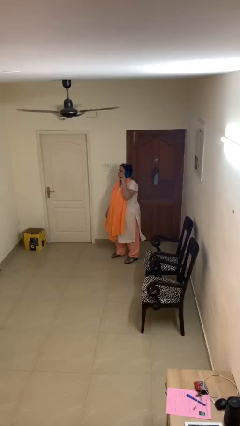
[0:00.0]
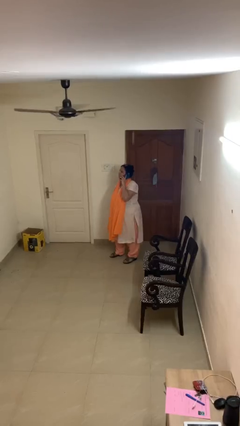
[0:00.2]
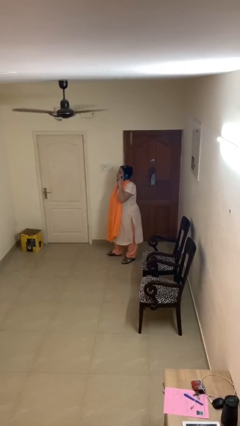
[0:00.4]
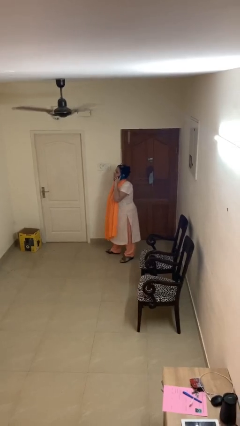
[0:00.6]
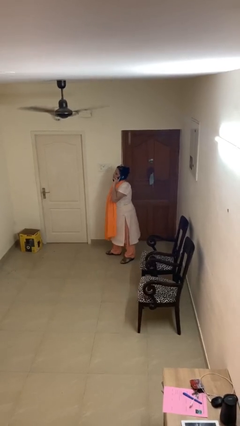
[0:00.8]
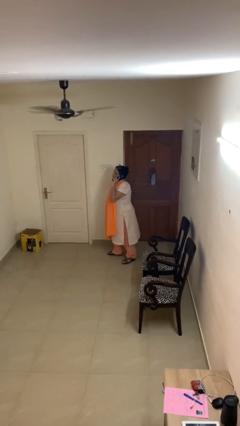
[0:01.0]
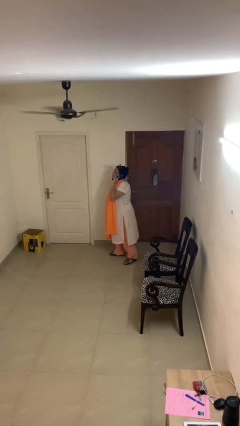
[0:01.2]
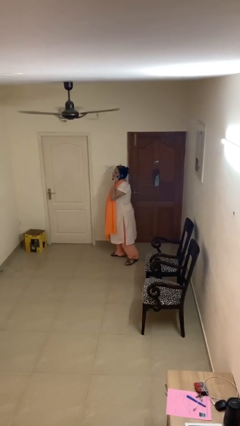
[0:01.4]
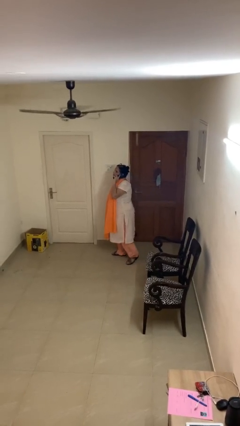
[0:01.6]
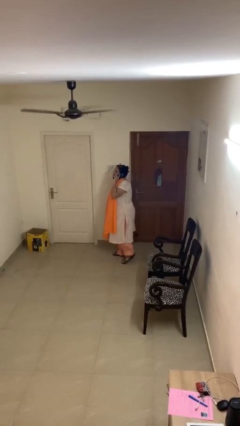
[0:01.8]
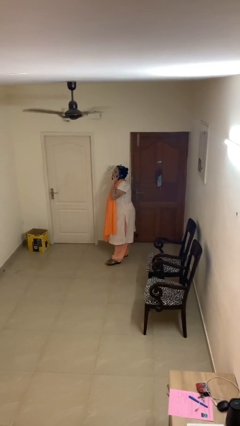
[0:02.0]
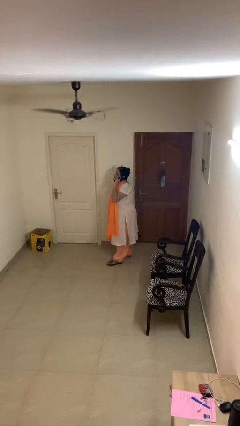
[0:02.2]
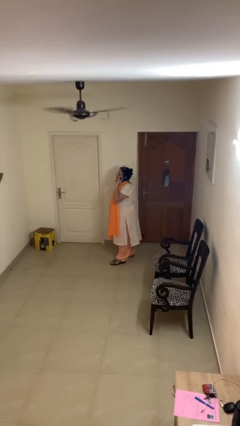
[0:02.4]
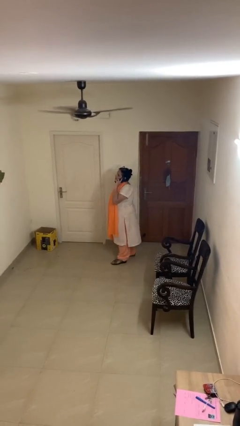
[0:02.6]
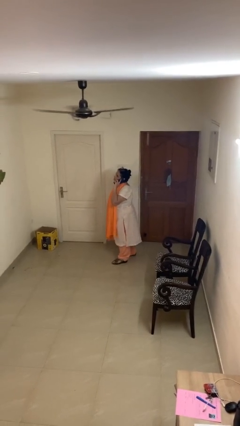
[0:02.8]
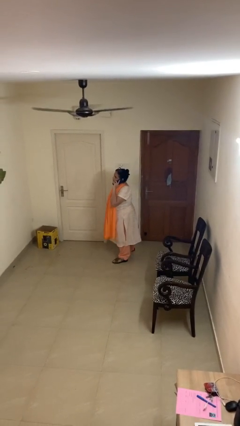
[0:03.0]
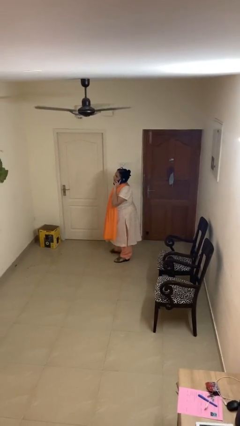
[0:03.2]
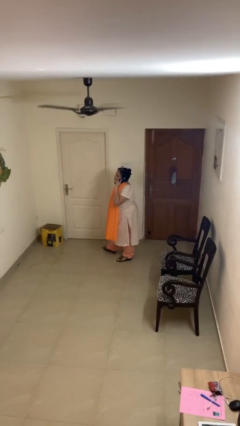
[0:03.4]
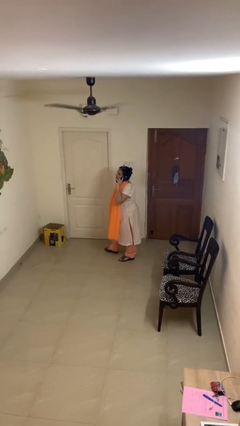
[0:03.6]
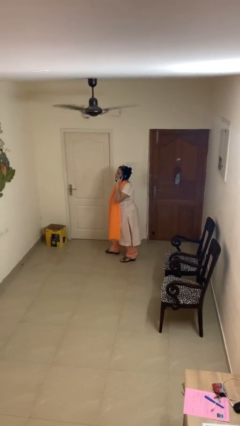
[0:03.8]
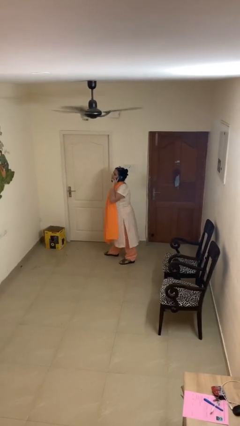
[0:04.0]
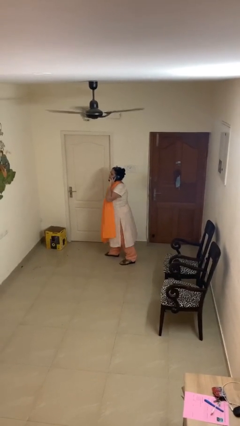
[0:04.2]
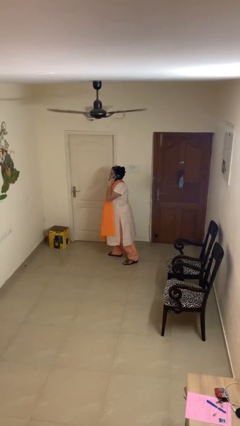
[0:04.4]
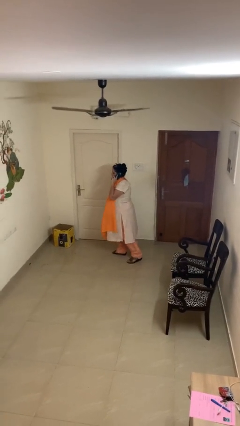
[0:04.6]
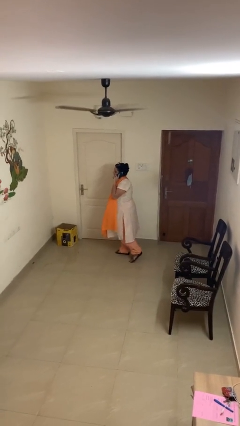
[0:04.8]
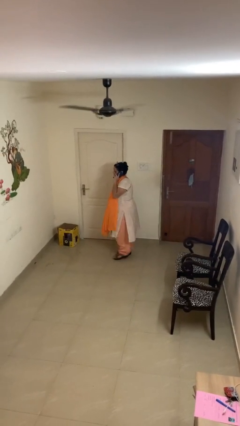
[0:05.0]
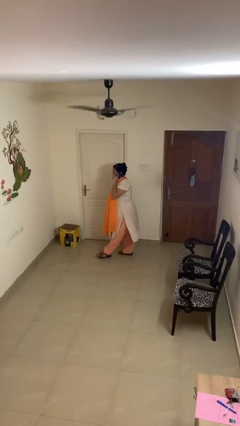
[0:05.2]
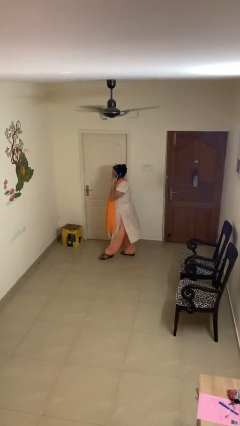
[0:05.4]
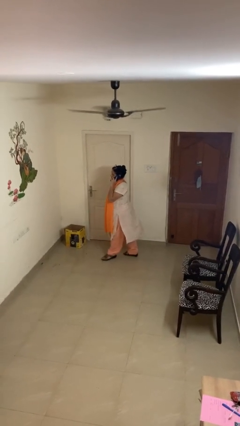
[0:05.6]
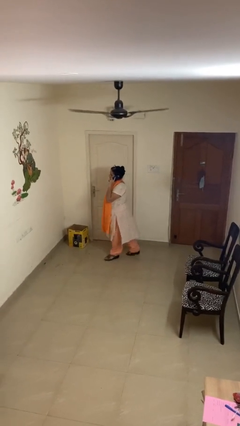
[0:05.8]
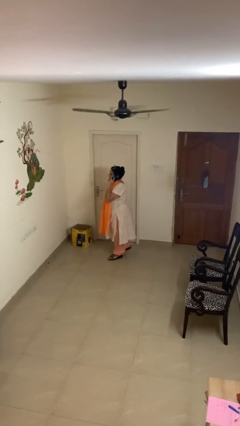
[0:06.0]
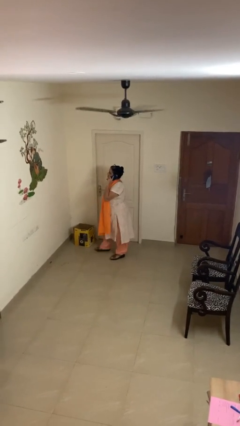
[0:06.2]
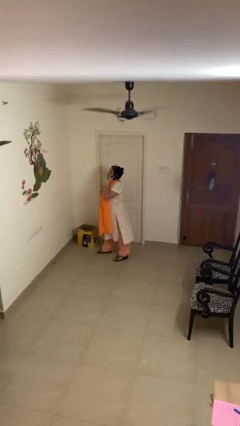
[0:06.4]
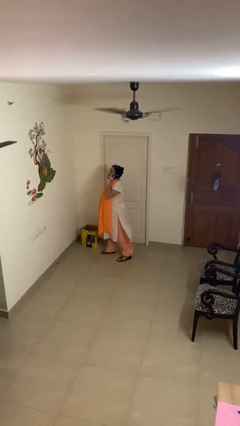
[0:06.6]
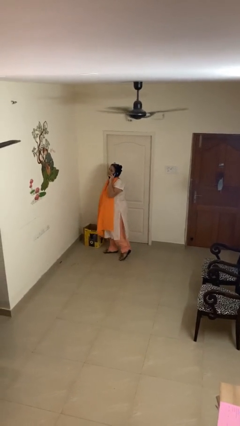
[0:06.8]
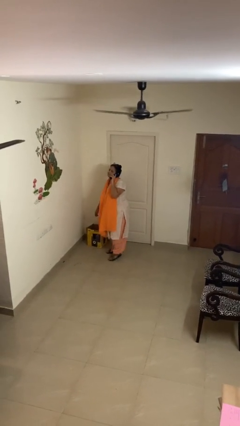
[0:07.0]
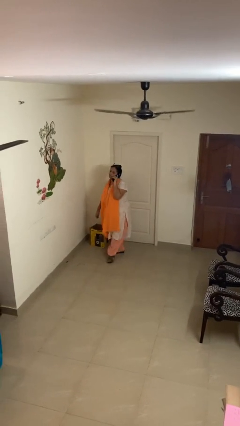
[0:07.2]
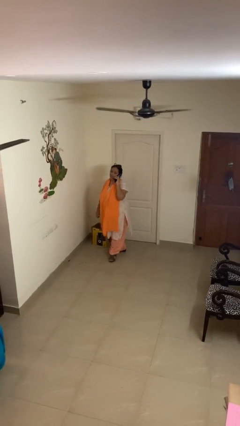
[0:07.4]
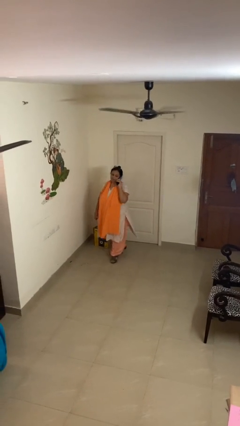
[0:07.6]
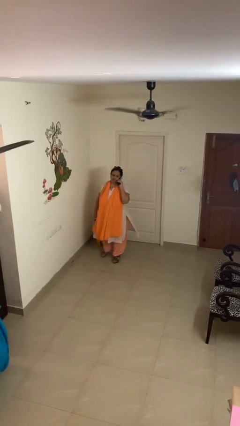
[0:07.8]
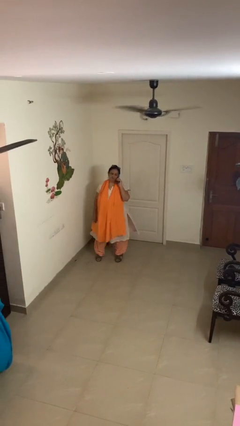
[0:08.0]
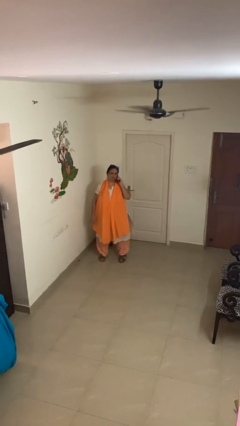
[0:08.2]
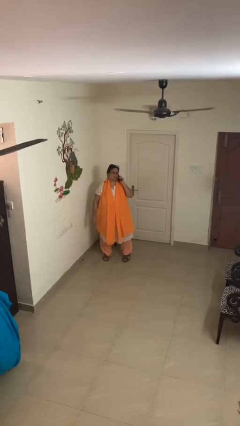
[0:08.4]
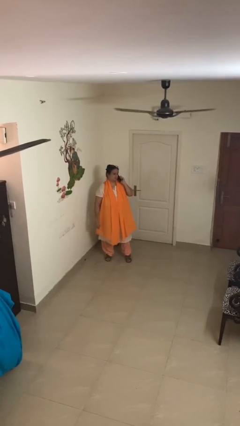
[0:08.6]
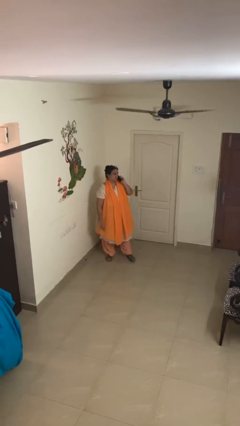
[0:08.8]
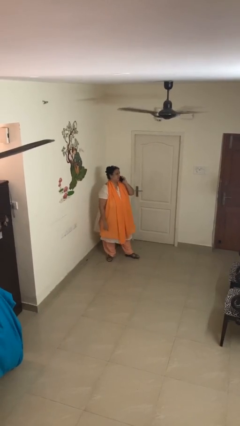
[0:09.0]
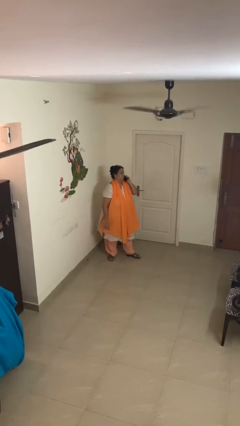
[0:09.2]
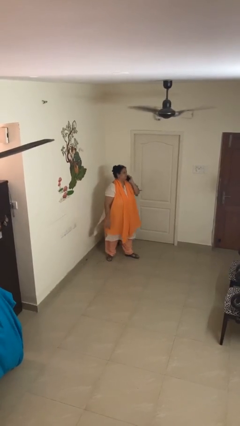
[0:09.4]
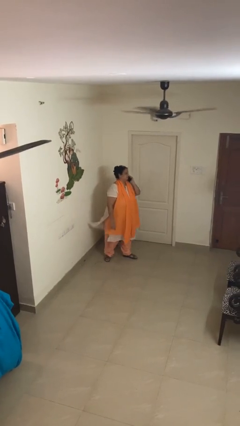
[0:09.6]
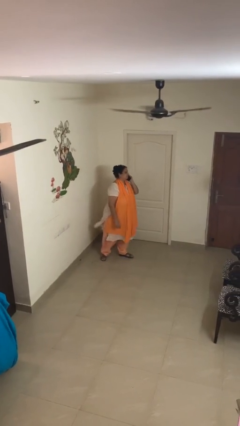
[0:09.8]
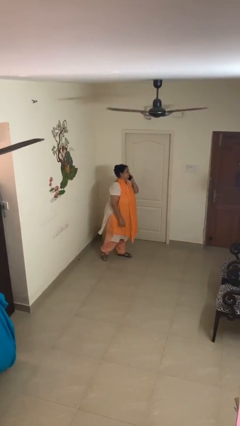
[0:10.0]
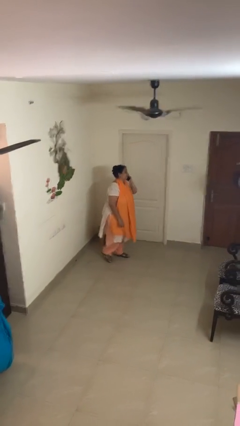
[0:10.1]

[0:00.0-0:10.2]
person talks on phone

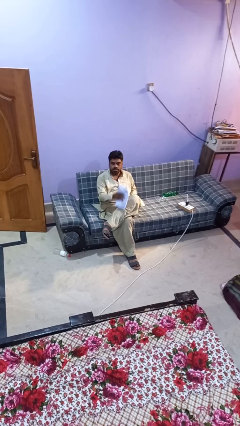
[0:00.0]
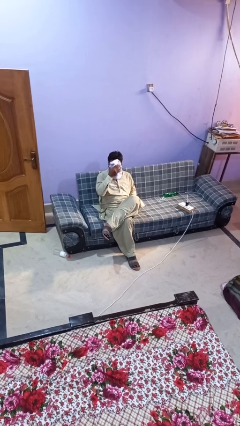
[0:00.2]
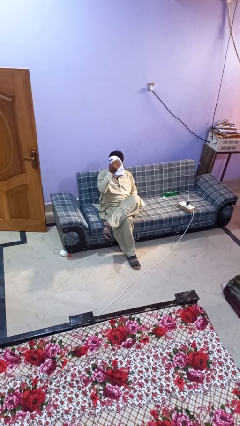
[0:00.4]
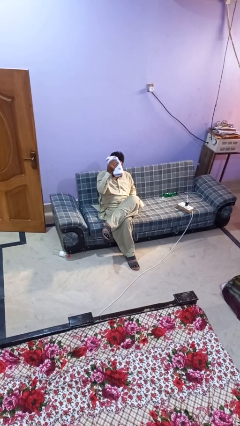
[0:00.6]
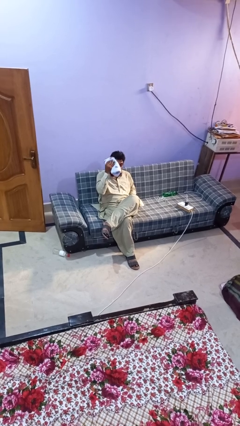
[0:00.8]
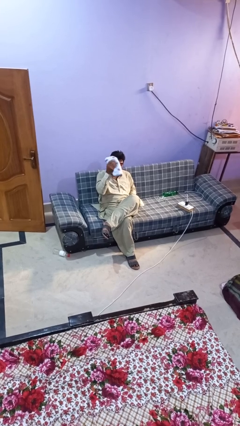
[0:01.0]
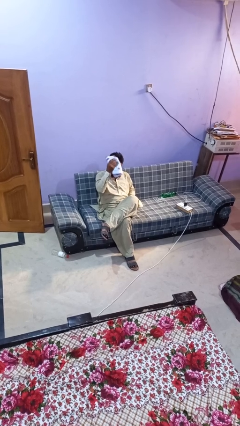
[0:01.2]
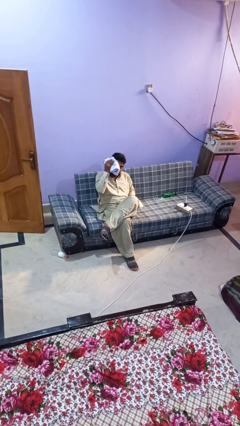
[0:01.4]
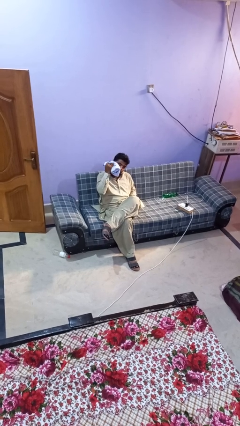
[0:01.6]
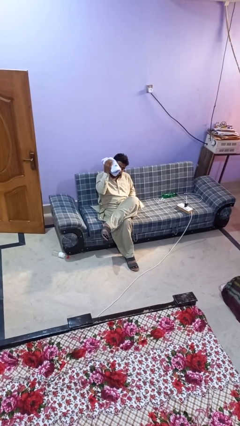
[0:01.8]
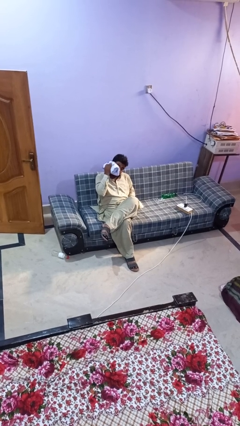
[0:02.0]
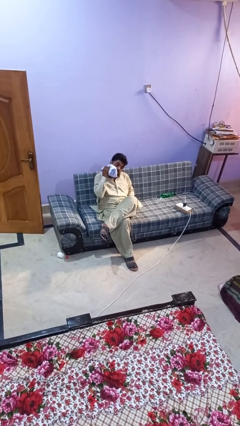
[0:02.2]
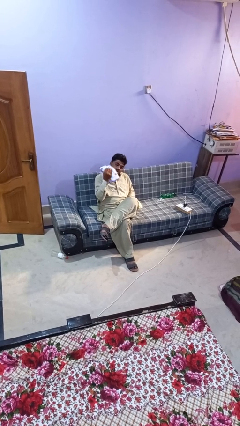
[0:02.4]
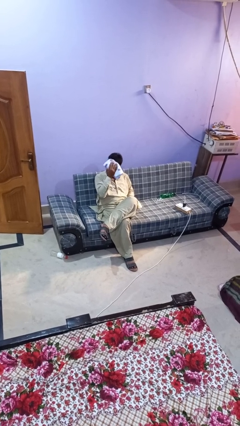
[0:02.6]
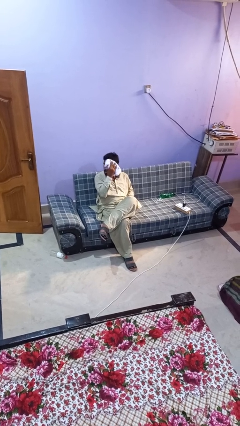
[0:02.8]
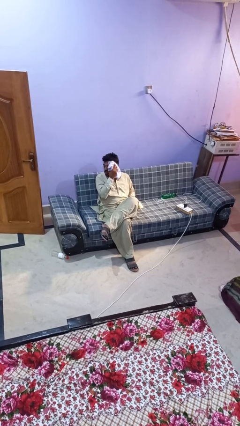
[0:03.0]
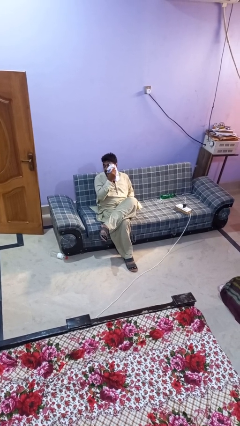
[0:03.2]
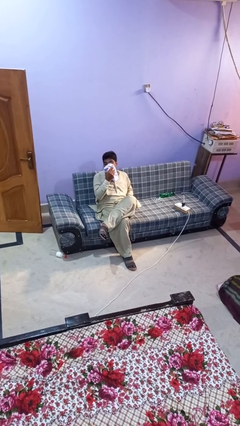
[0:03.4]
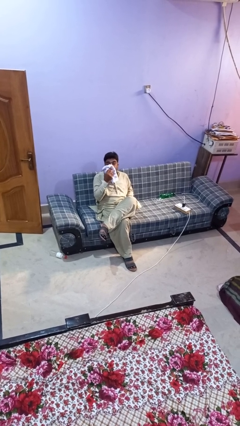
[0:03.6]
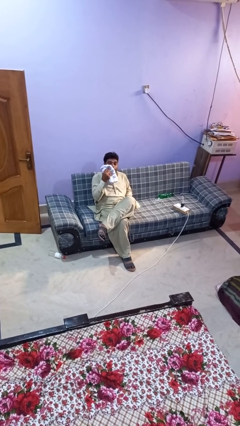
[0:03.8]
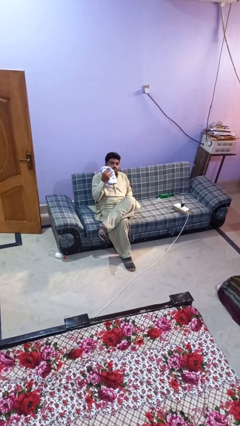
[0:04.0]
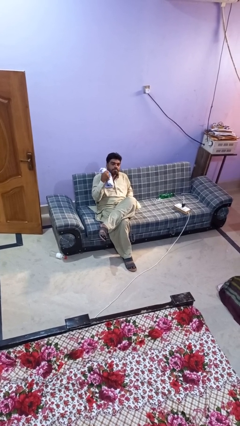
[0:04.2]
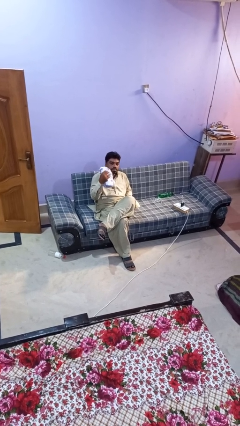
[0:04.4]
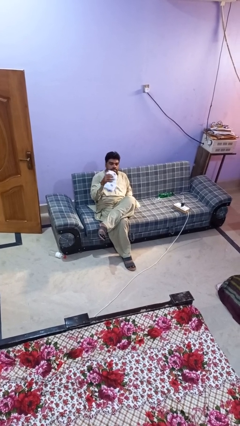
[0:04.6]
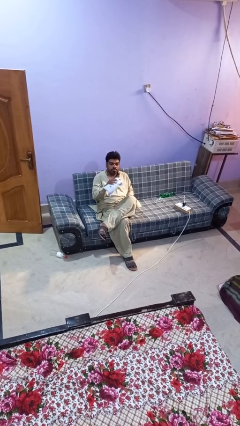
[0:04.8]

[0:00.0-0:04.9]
person wipes mouth with napkin

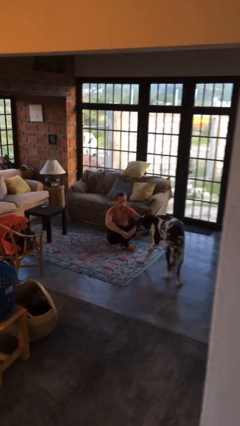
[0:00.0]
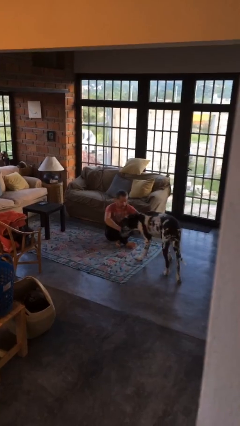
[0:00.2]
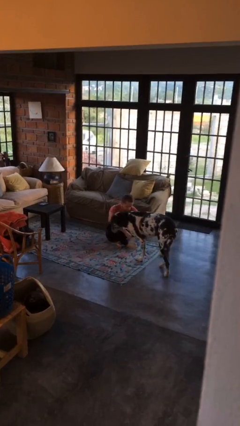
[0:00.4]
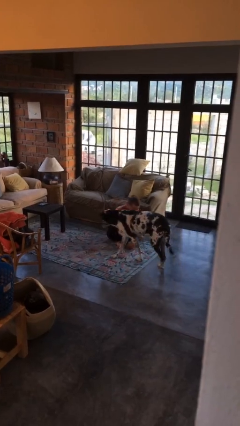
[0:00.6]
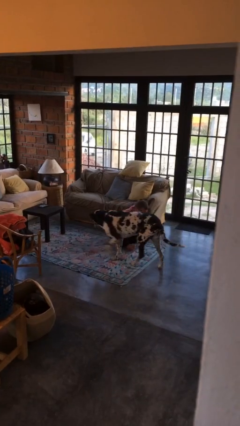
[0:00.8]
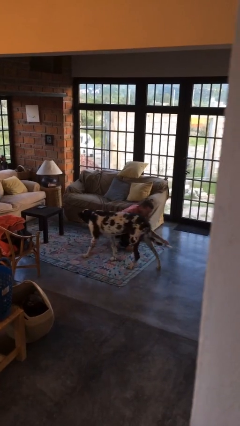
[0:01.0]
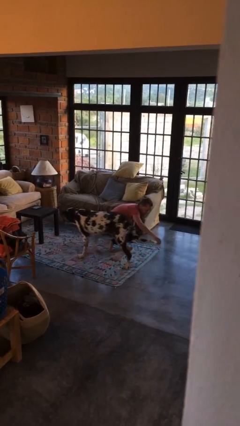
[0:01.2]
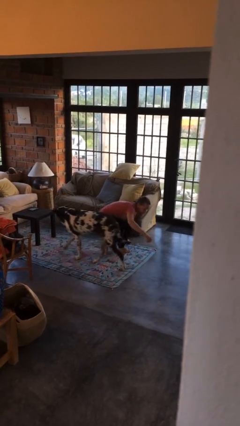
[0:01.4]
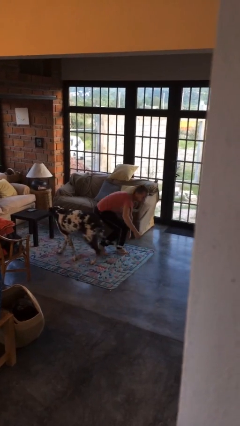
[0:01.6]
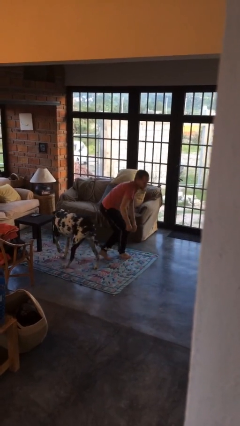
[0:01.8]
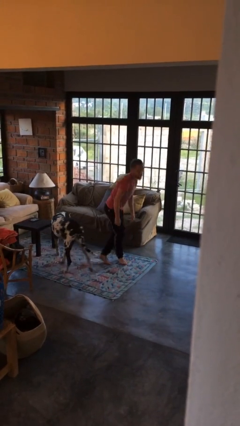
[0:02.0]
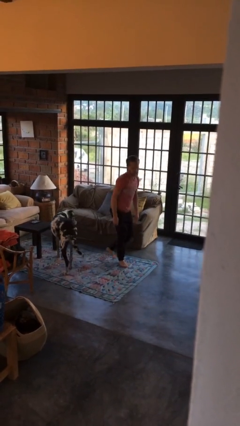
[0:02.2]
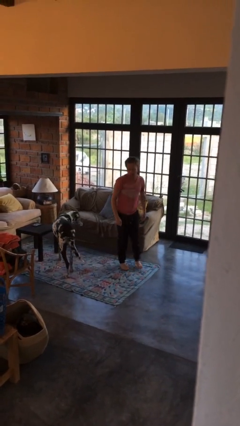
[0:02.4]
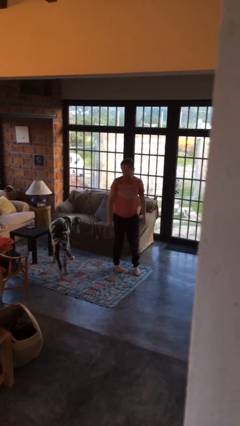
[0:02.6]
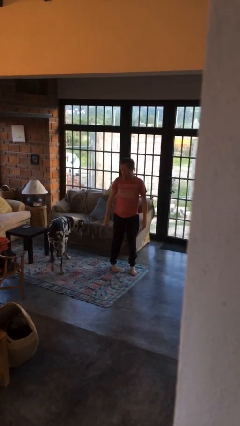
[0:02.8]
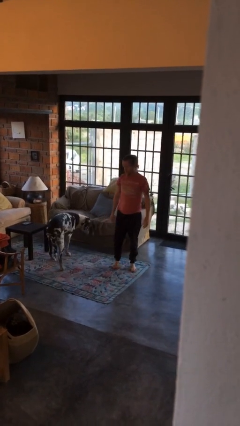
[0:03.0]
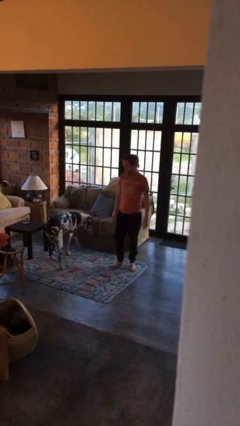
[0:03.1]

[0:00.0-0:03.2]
person stands up from floor
